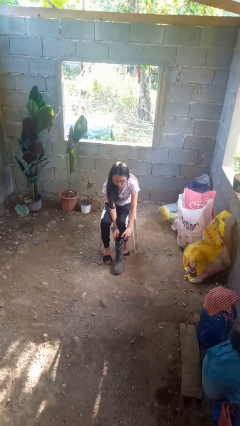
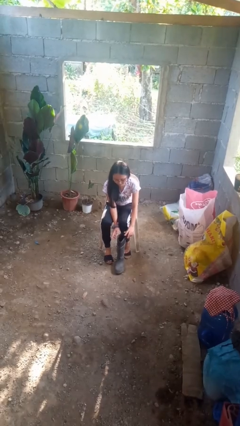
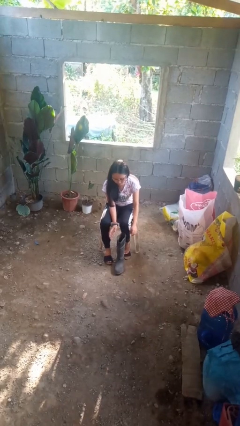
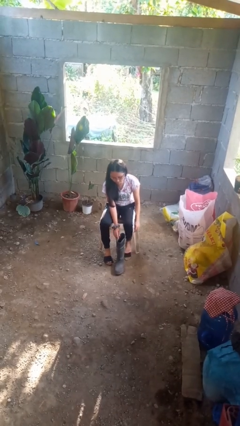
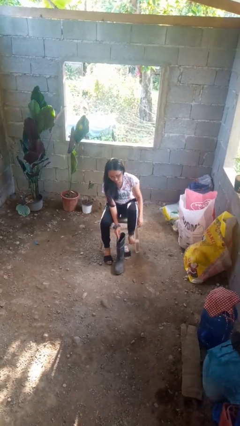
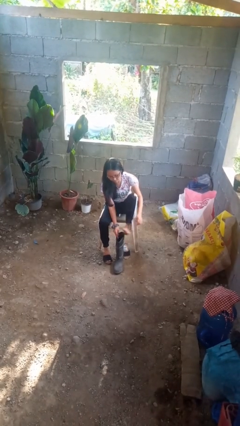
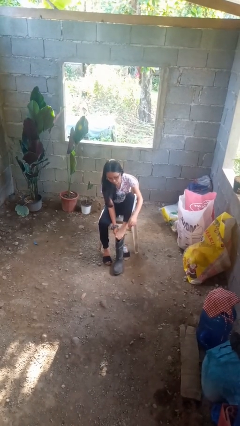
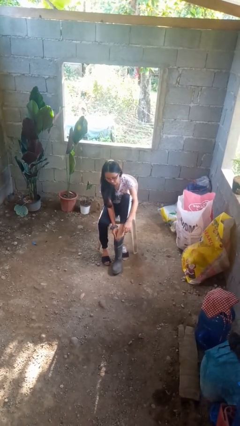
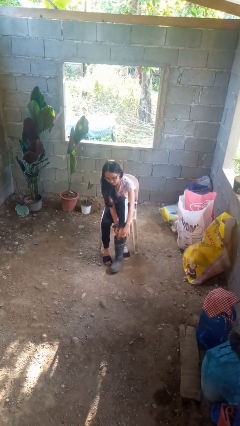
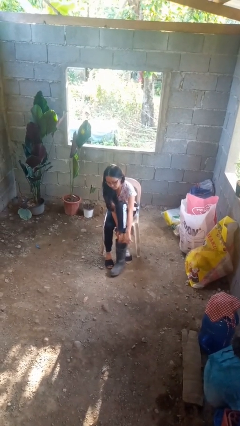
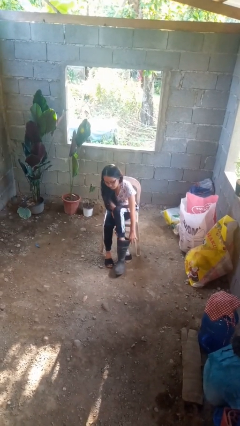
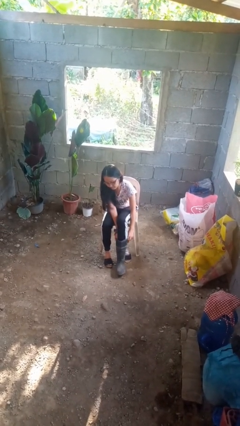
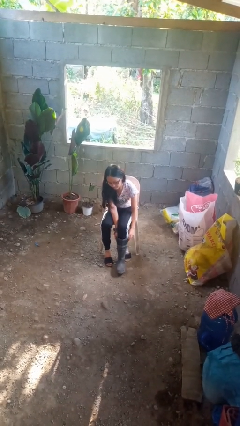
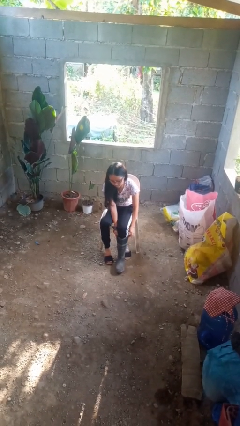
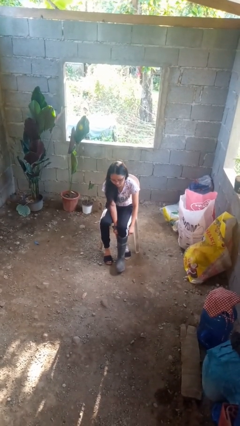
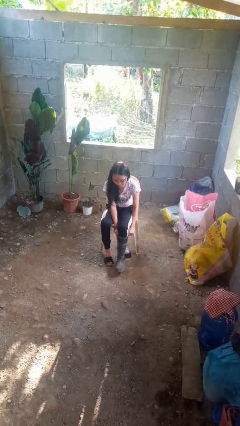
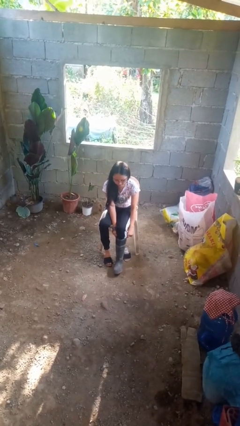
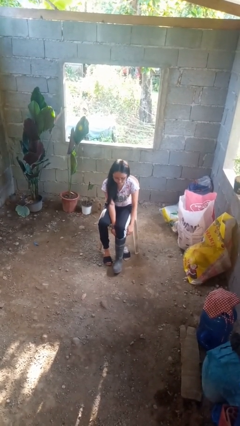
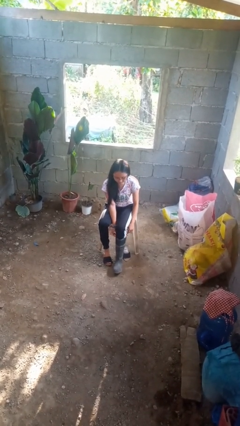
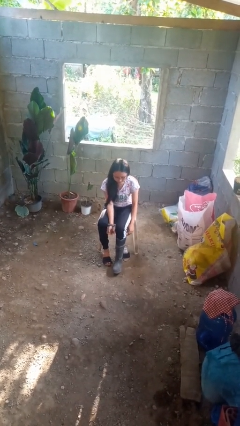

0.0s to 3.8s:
person puts on boots

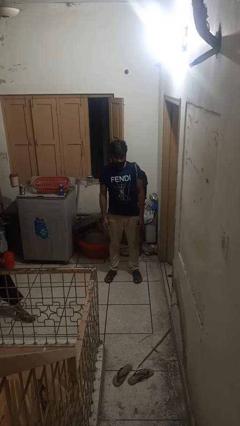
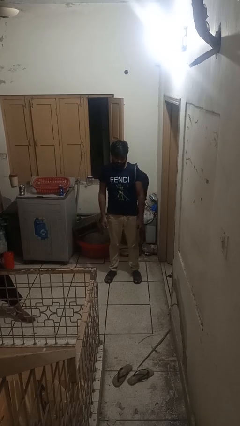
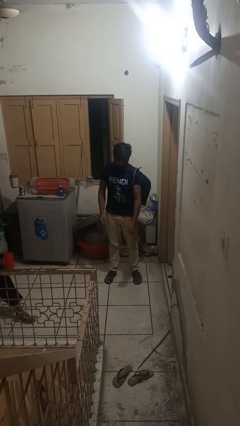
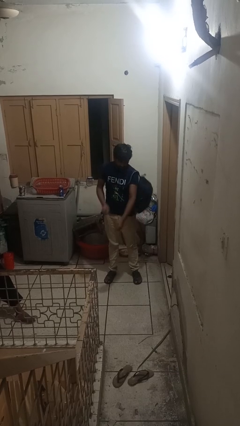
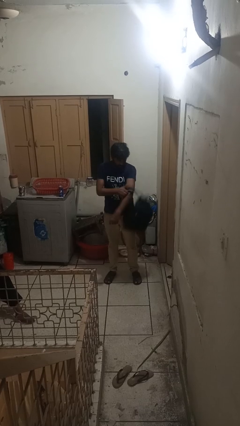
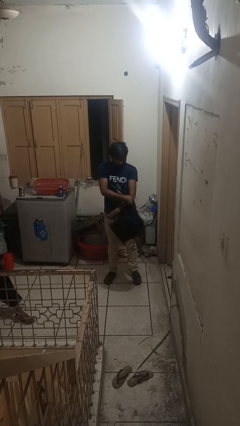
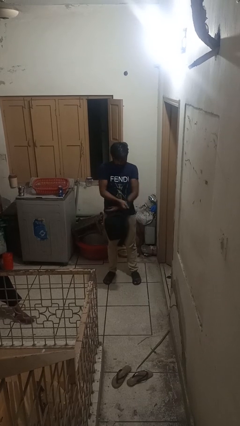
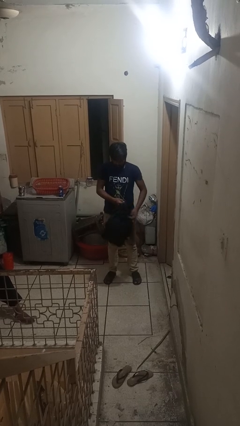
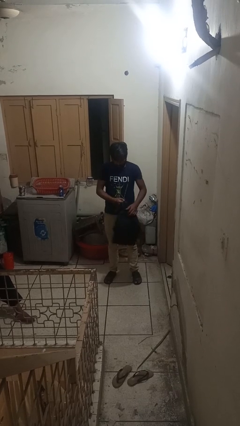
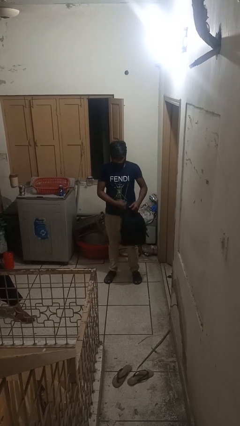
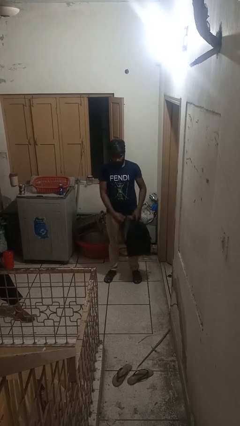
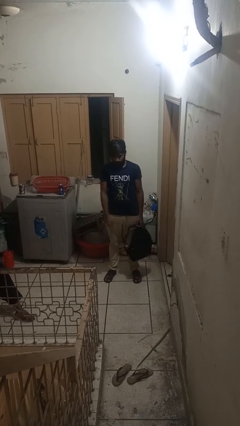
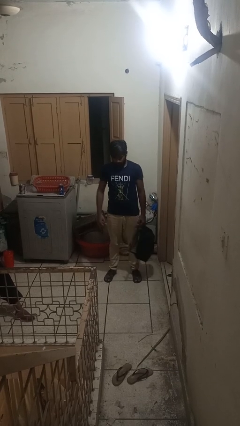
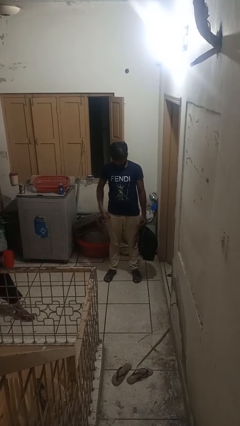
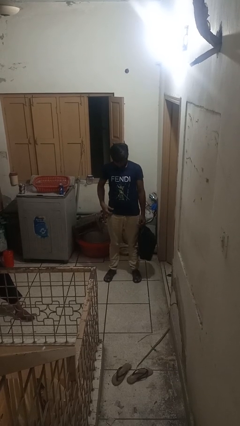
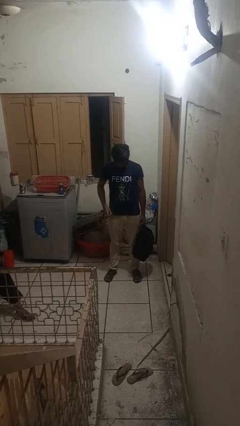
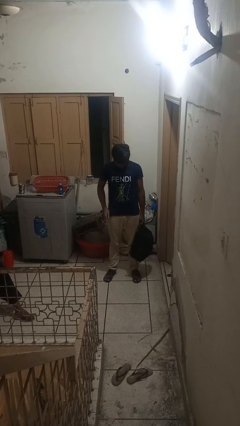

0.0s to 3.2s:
person takes off backpack

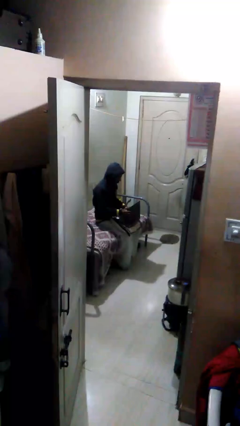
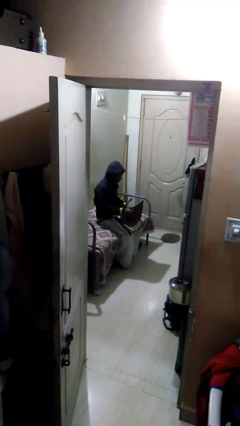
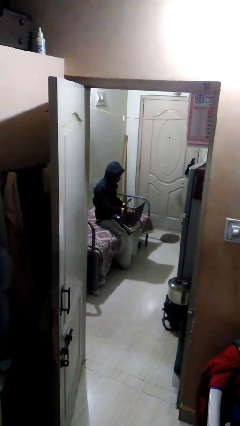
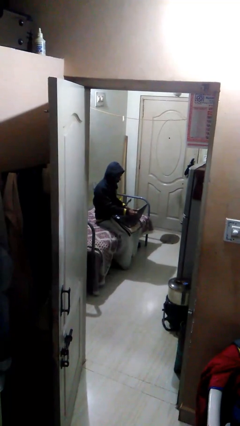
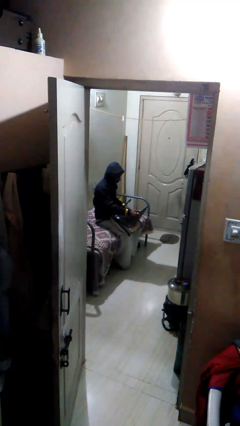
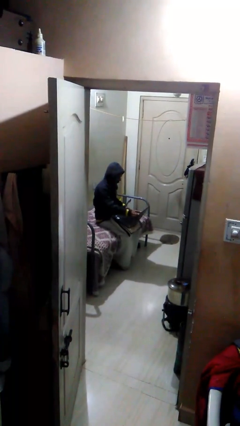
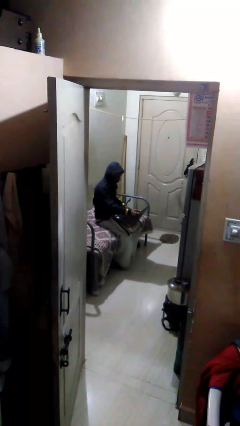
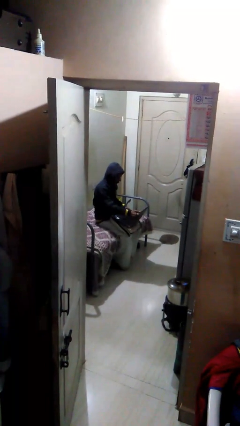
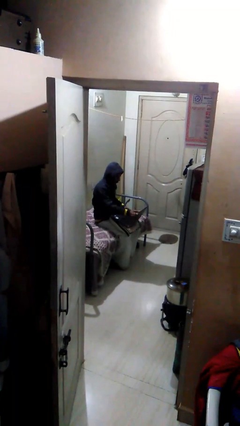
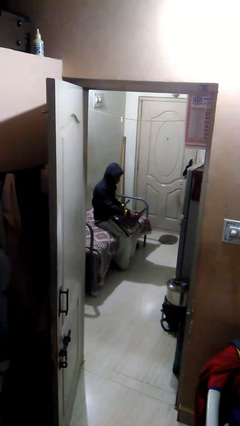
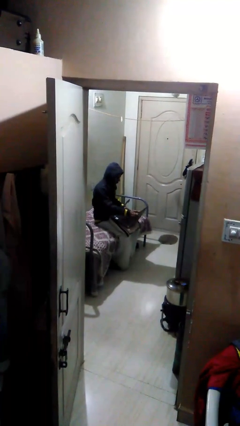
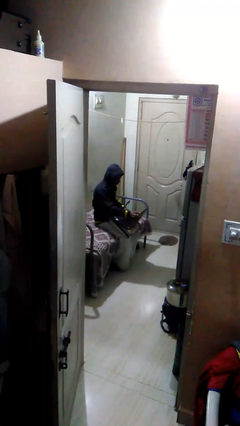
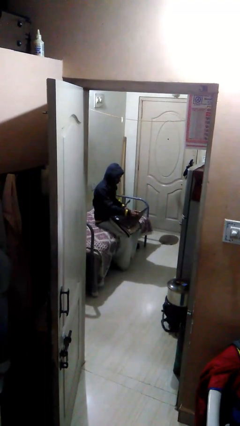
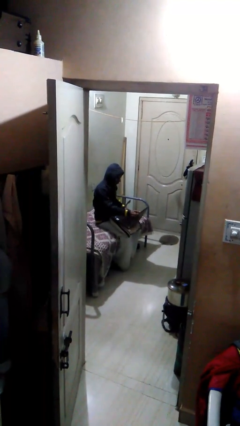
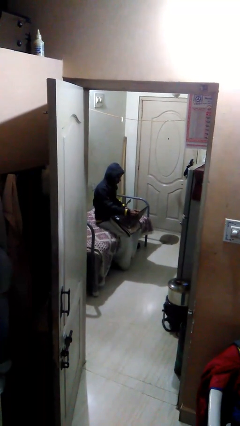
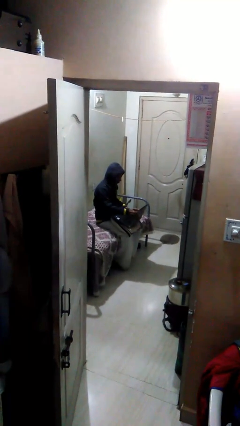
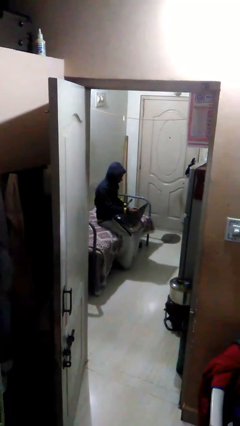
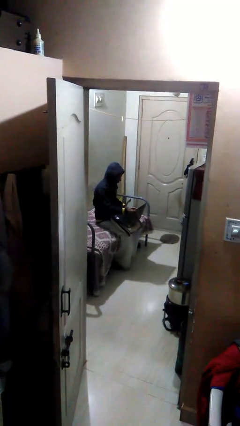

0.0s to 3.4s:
person interacts with laptop

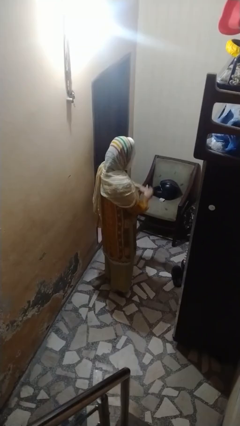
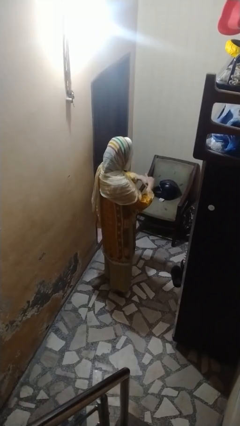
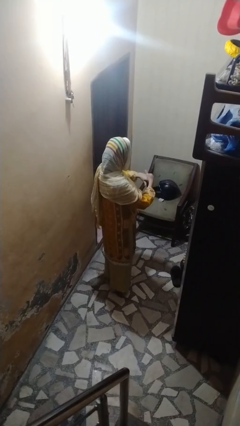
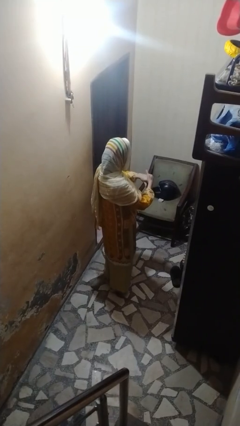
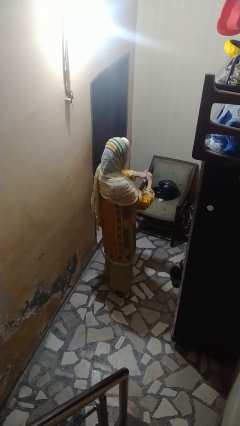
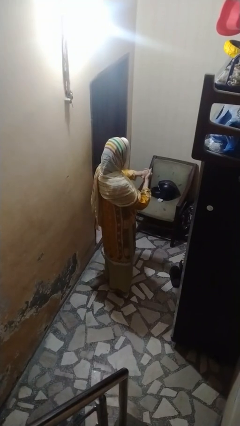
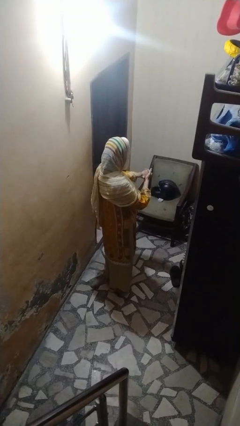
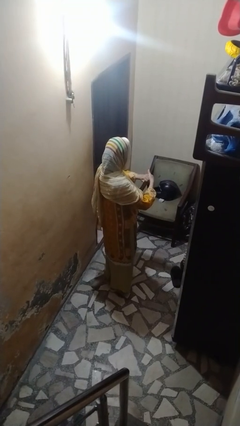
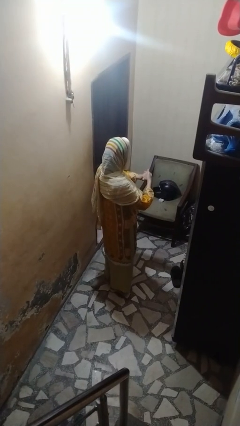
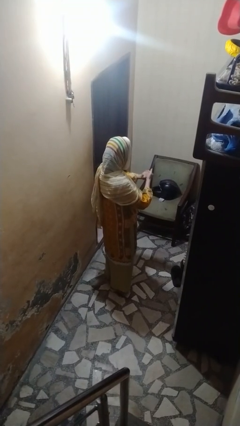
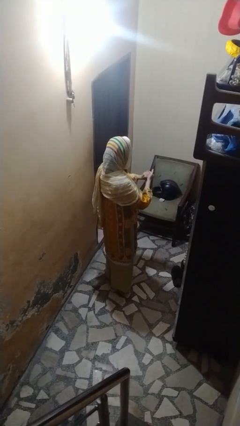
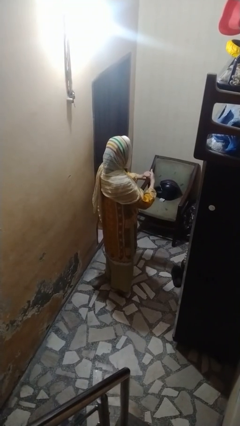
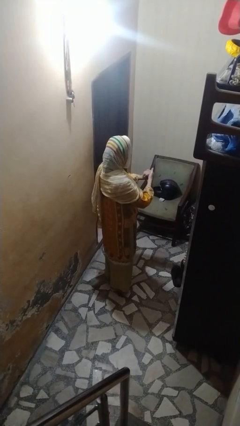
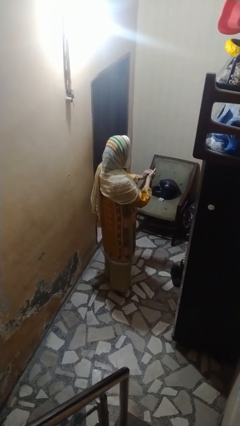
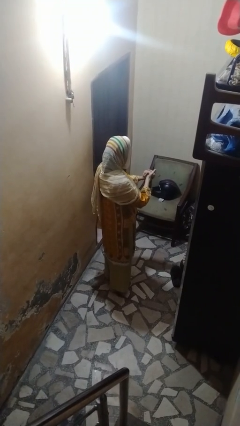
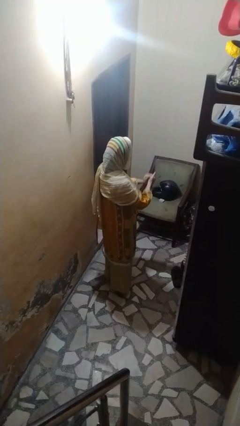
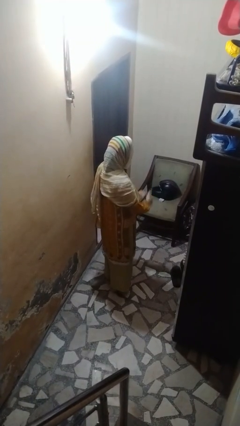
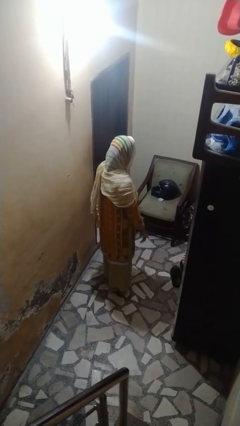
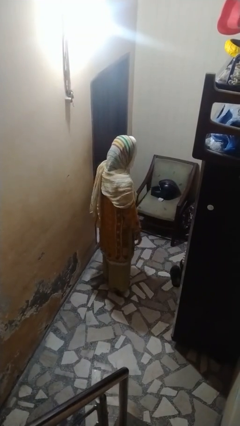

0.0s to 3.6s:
person cracks knuckles

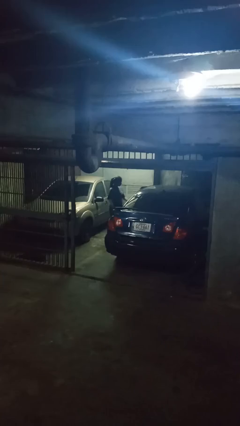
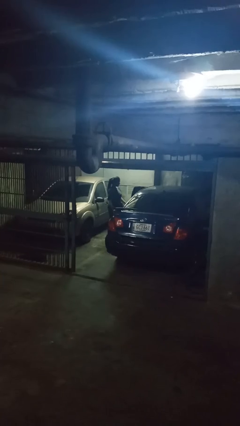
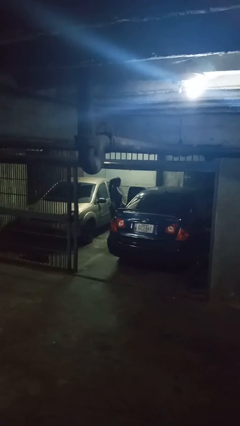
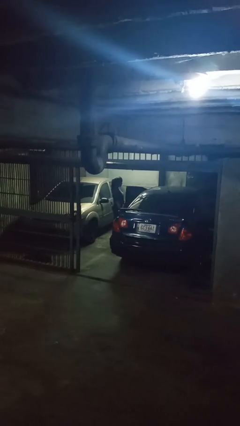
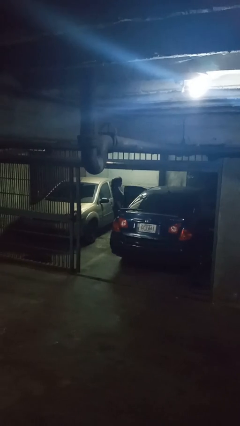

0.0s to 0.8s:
person opens car door

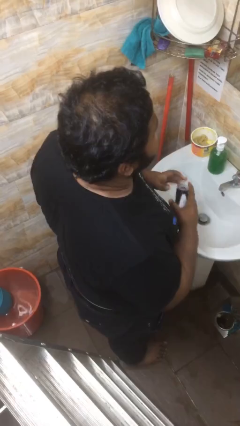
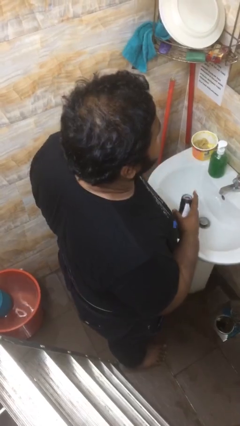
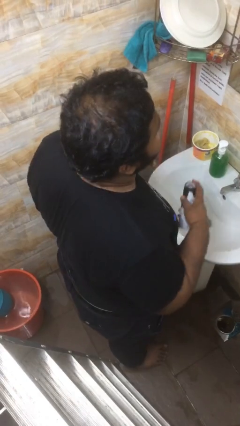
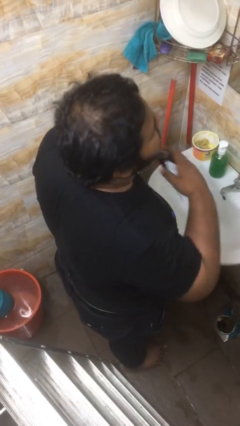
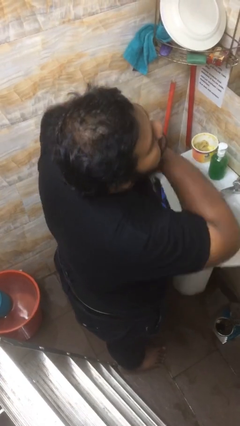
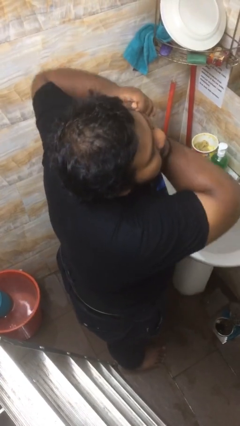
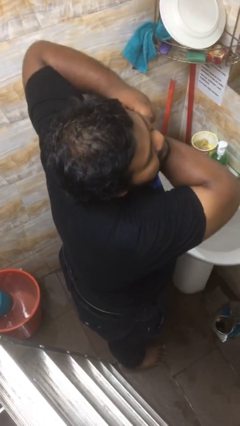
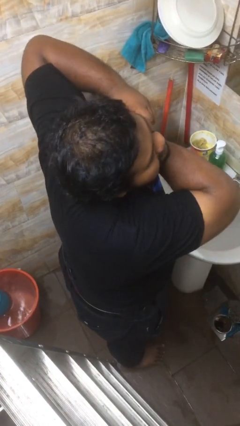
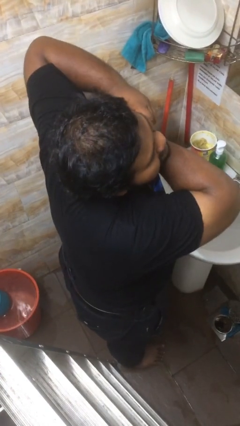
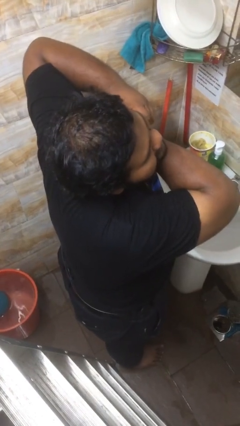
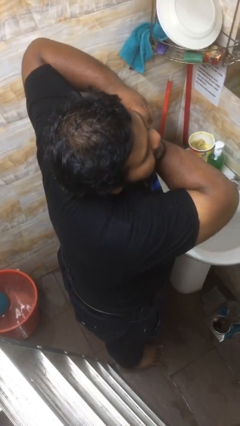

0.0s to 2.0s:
person applies deodorant

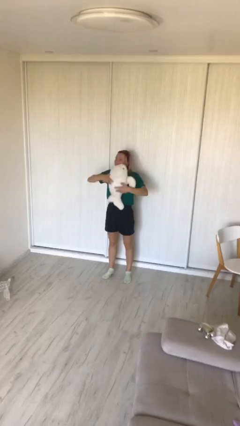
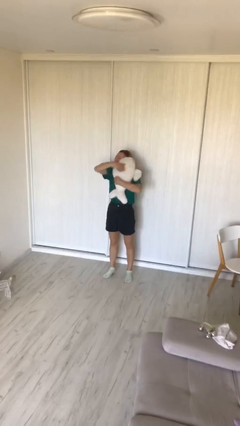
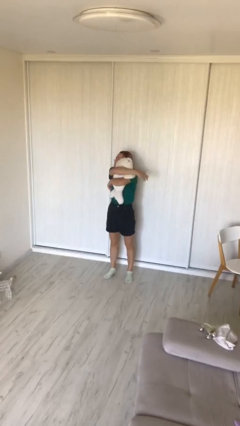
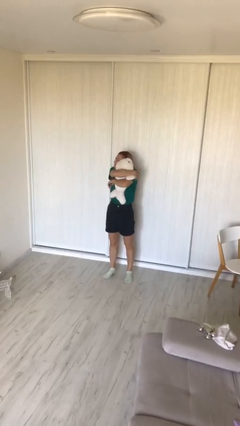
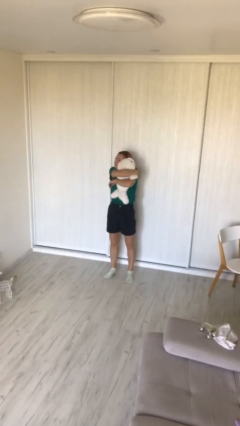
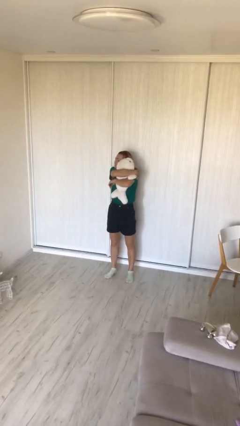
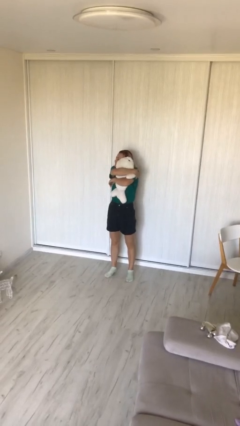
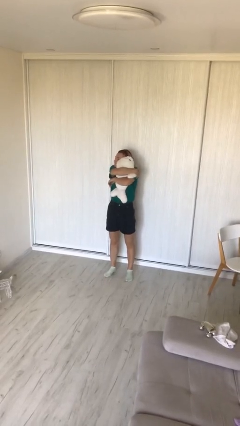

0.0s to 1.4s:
person hugs stuffed animal
